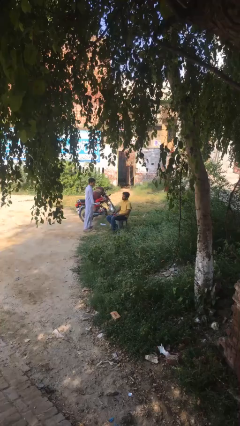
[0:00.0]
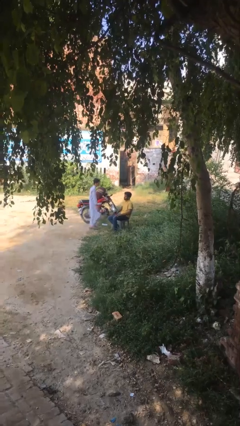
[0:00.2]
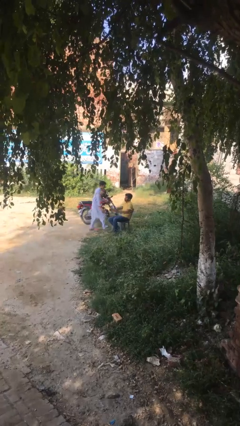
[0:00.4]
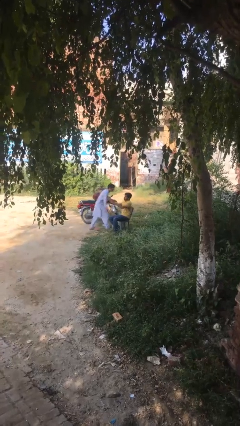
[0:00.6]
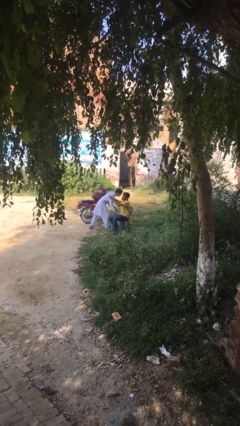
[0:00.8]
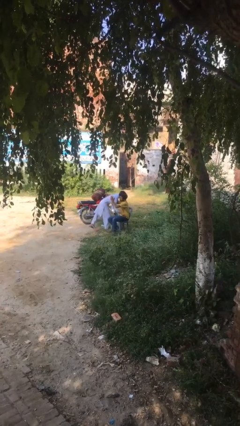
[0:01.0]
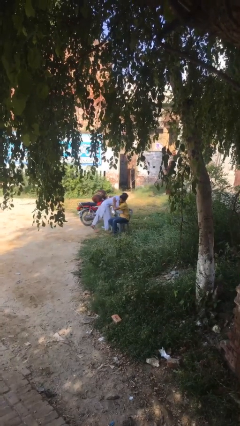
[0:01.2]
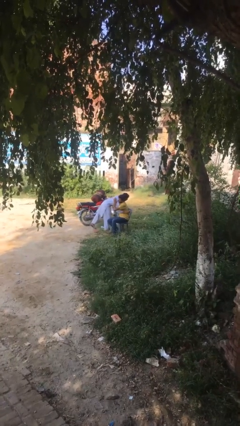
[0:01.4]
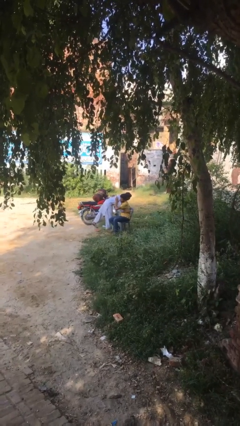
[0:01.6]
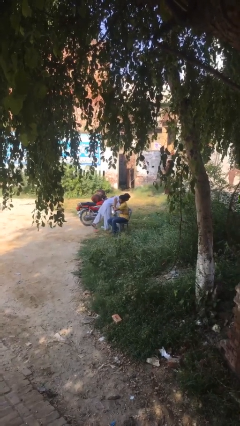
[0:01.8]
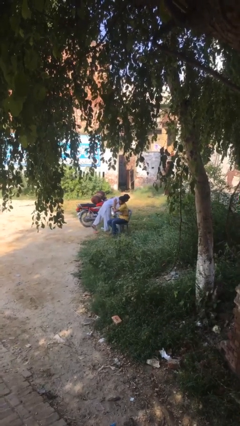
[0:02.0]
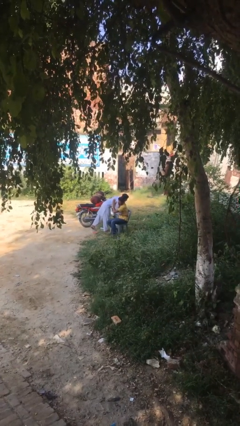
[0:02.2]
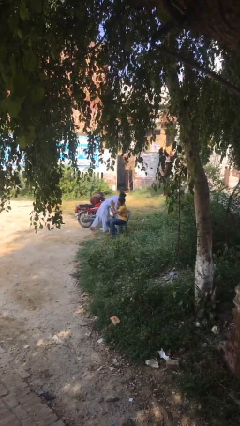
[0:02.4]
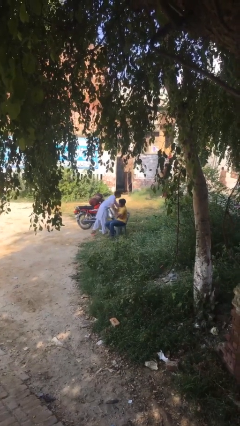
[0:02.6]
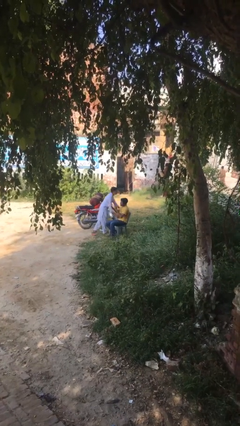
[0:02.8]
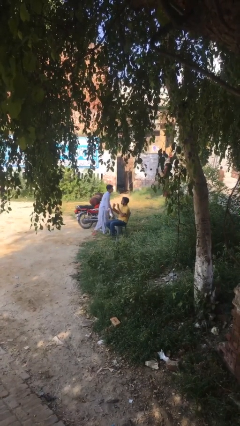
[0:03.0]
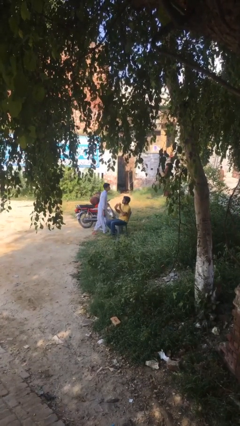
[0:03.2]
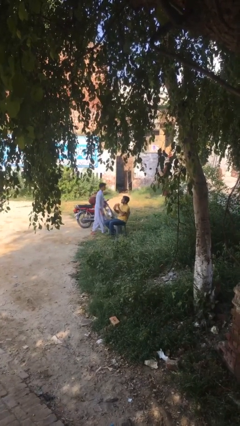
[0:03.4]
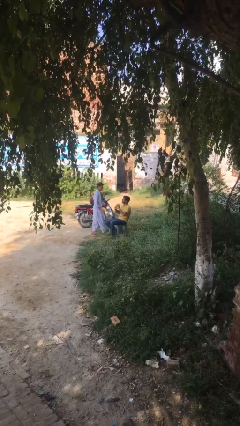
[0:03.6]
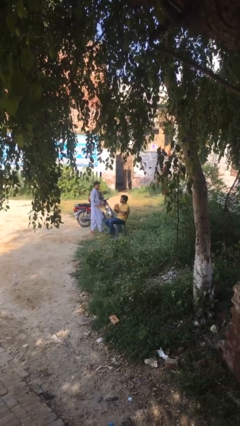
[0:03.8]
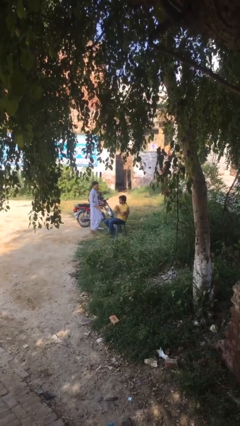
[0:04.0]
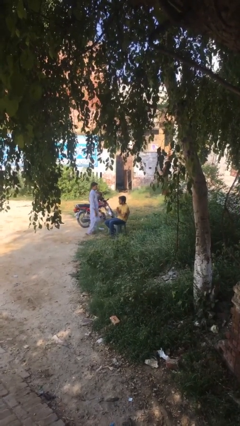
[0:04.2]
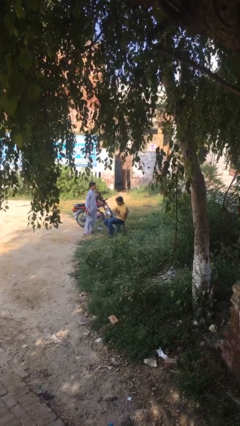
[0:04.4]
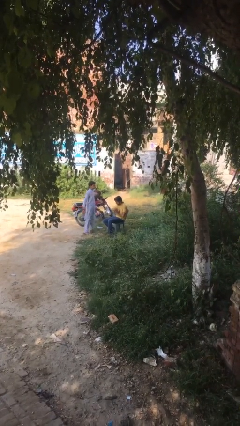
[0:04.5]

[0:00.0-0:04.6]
person embraces person

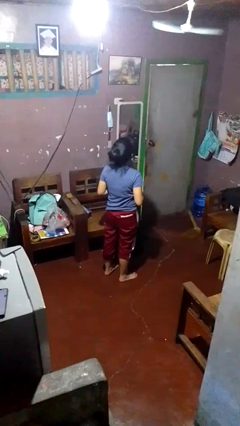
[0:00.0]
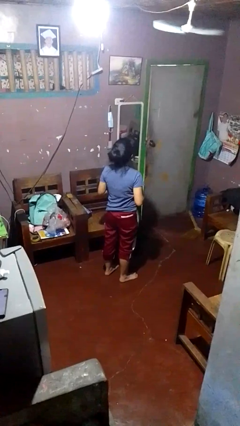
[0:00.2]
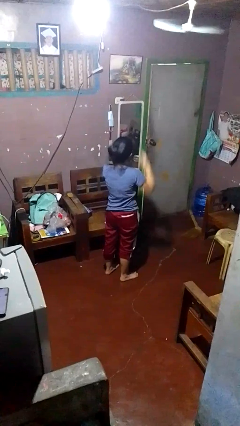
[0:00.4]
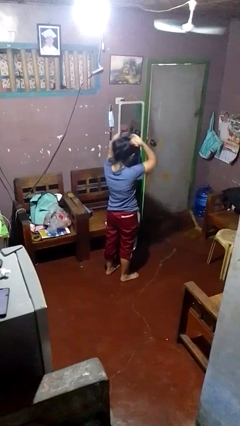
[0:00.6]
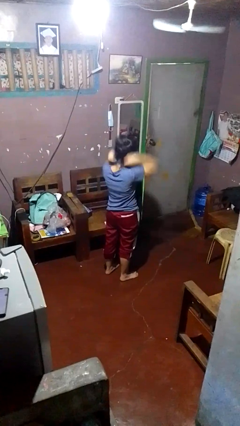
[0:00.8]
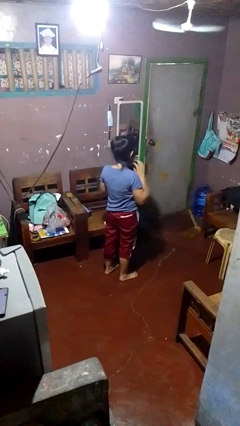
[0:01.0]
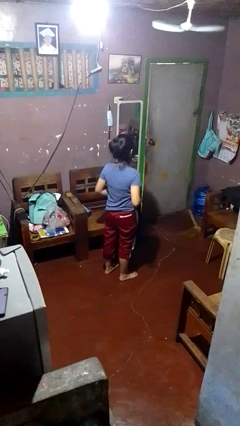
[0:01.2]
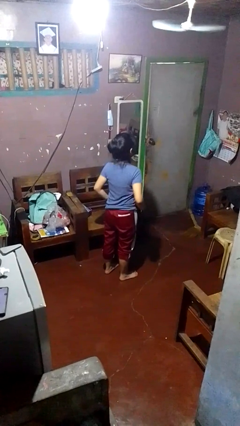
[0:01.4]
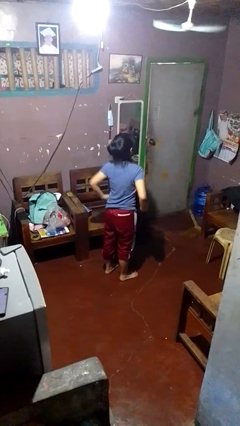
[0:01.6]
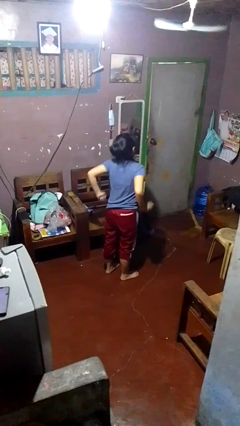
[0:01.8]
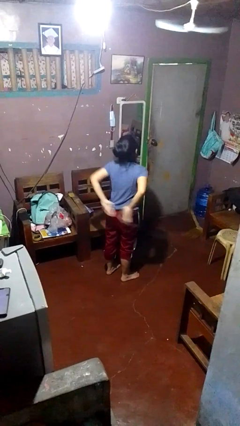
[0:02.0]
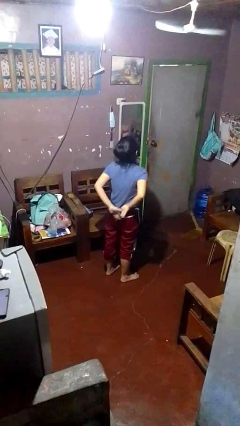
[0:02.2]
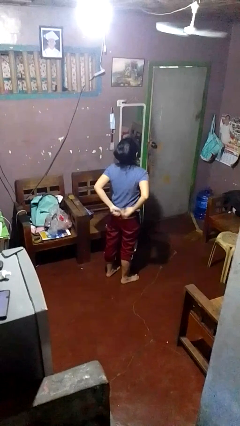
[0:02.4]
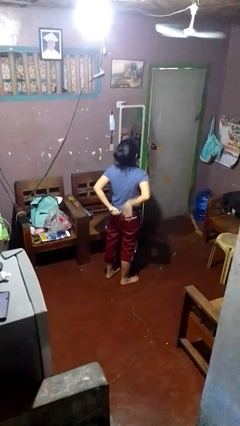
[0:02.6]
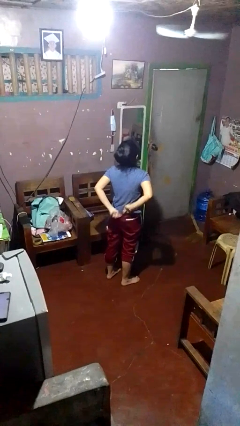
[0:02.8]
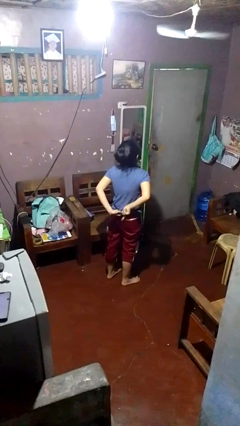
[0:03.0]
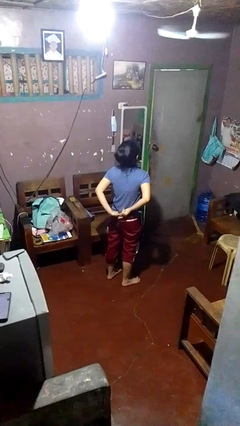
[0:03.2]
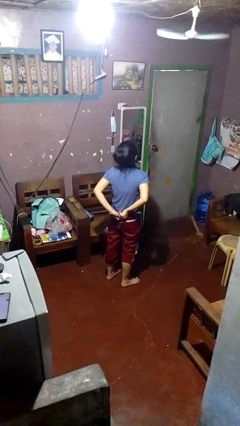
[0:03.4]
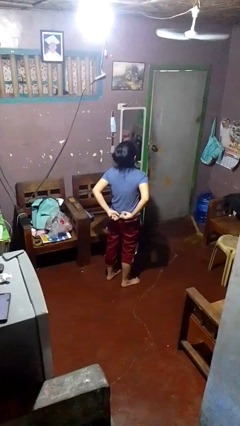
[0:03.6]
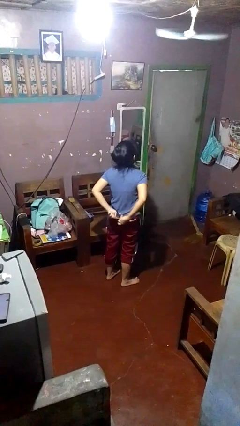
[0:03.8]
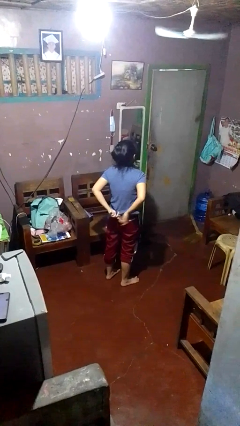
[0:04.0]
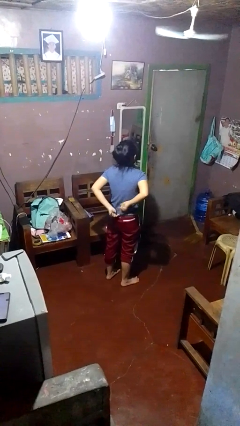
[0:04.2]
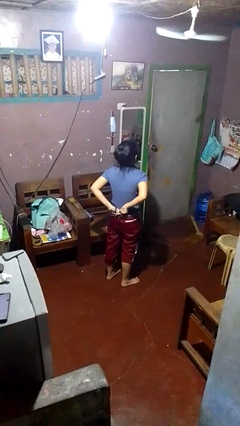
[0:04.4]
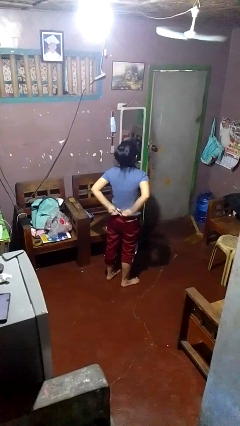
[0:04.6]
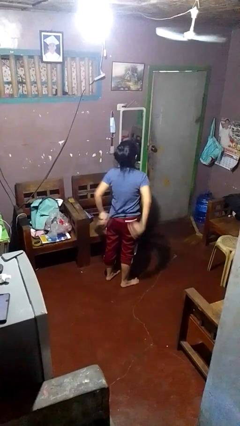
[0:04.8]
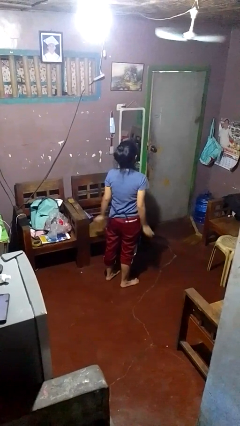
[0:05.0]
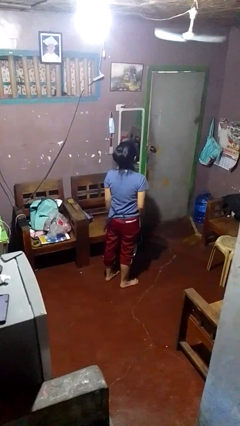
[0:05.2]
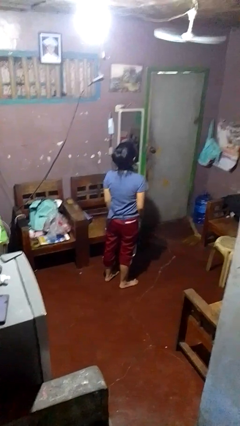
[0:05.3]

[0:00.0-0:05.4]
person puts on apron

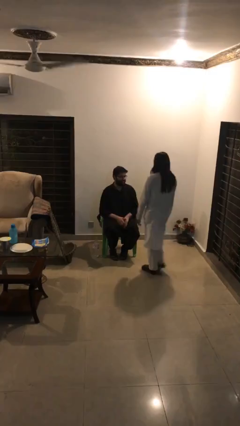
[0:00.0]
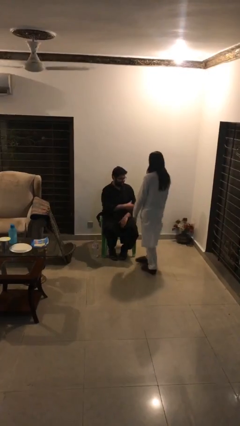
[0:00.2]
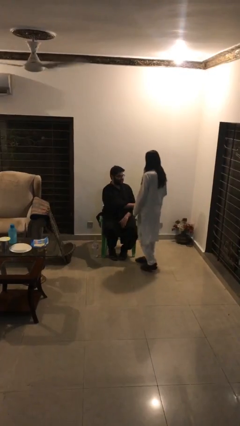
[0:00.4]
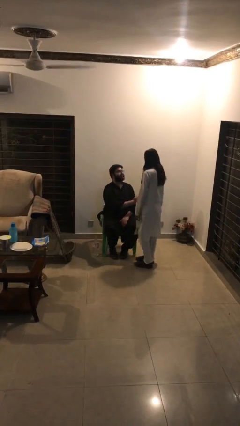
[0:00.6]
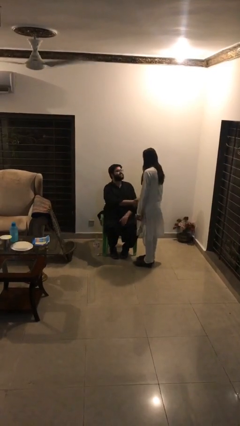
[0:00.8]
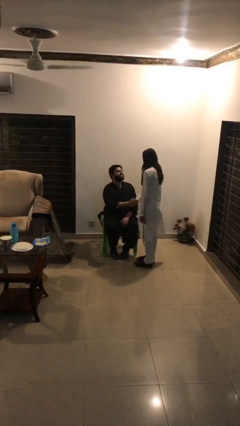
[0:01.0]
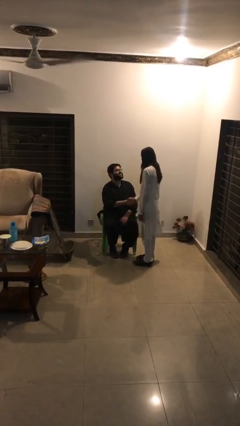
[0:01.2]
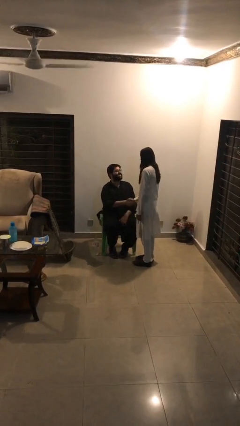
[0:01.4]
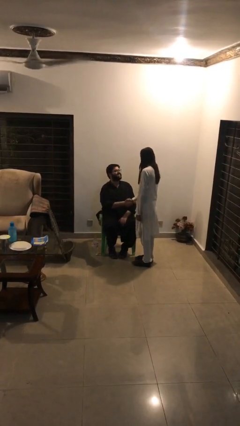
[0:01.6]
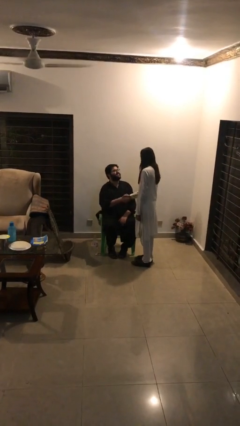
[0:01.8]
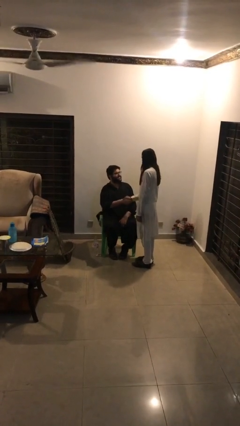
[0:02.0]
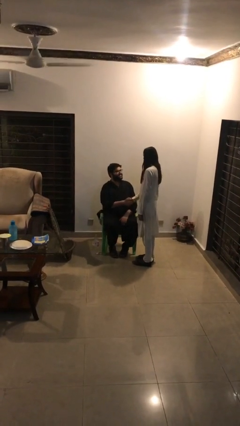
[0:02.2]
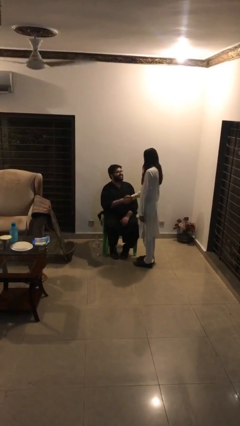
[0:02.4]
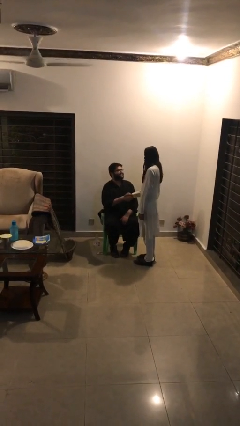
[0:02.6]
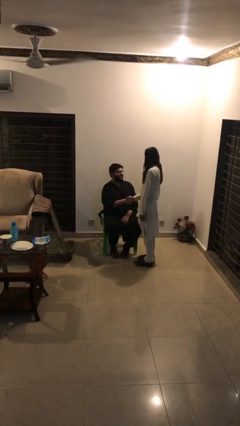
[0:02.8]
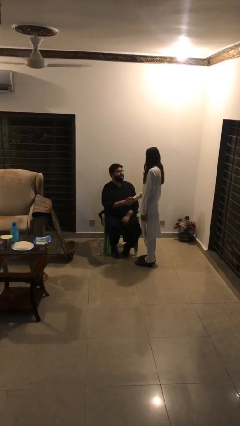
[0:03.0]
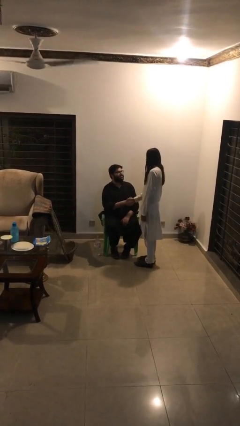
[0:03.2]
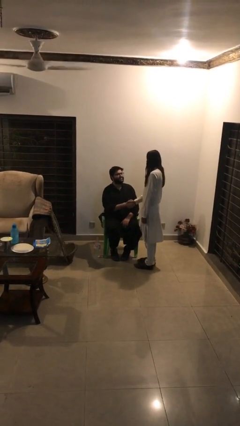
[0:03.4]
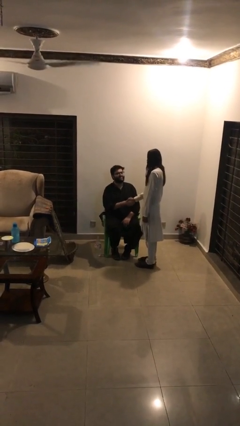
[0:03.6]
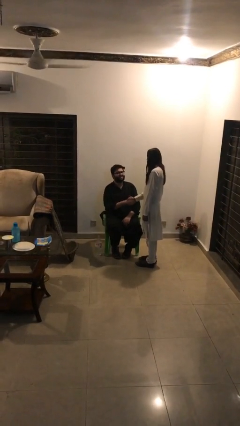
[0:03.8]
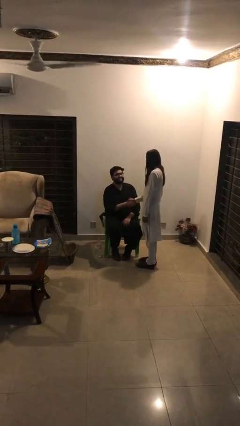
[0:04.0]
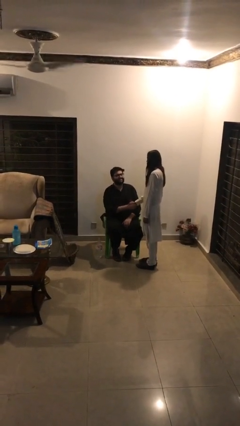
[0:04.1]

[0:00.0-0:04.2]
person shakes hand

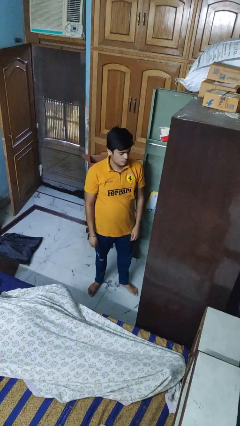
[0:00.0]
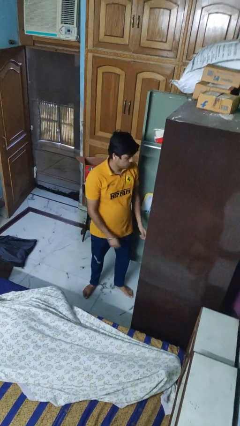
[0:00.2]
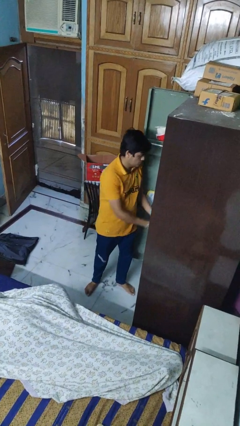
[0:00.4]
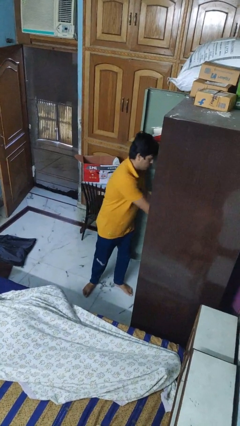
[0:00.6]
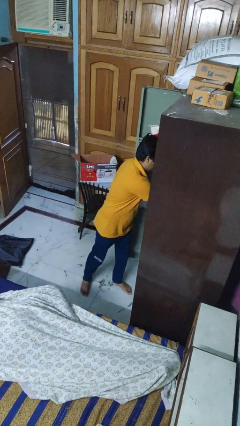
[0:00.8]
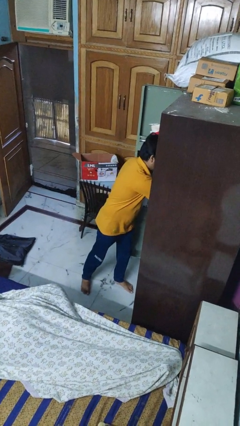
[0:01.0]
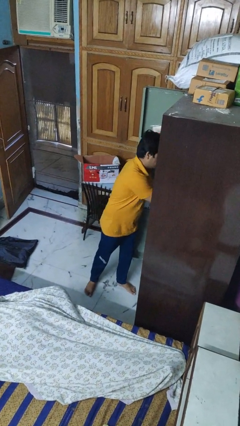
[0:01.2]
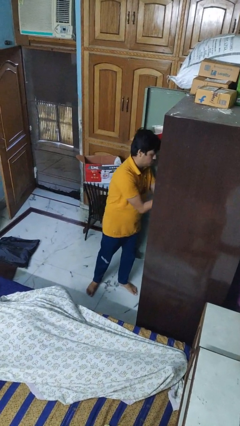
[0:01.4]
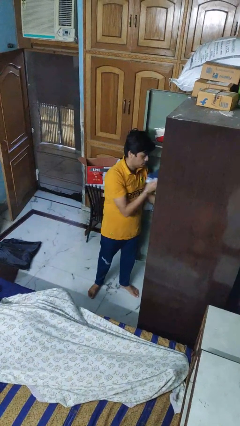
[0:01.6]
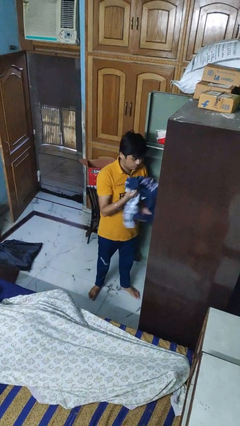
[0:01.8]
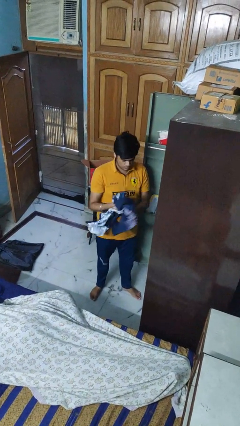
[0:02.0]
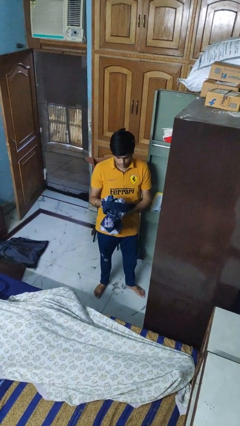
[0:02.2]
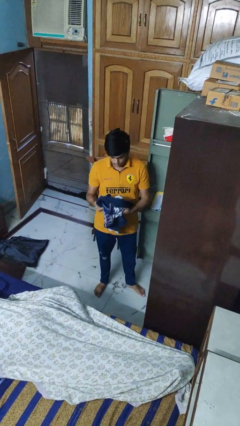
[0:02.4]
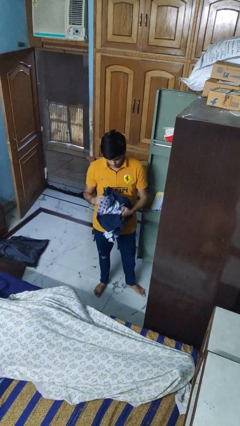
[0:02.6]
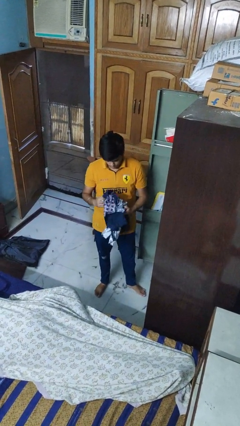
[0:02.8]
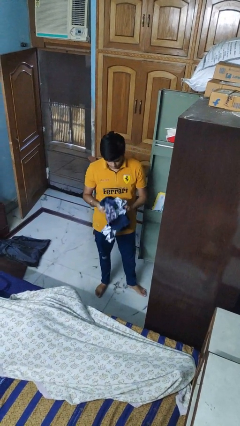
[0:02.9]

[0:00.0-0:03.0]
person takes clothes from dresser

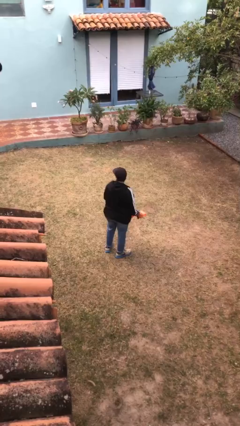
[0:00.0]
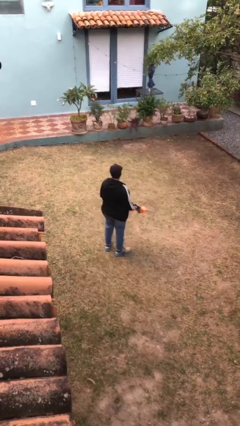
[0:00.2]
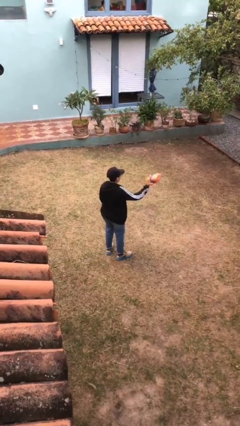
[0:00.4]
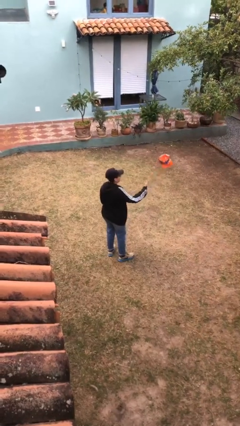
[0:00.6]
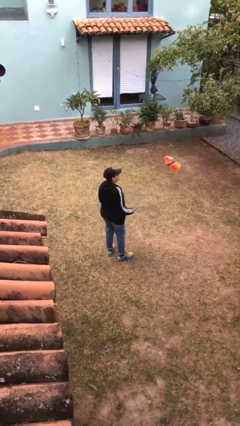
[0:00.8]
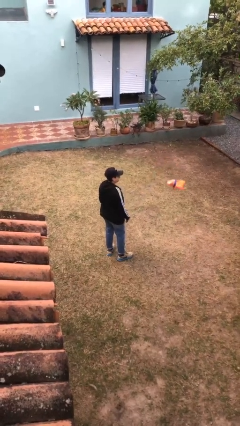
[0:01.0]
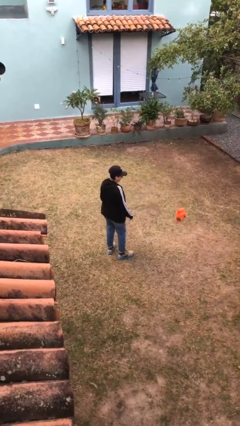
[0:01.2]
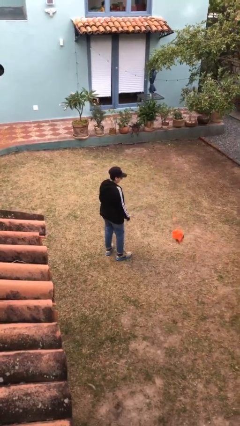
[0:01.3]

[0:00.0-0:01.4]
person throws object into air
